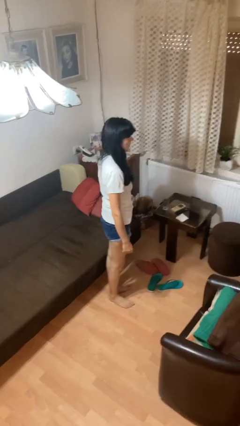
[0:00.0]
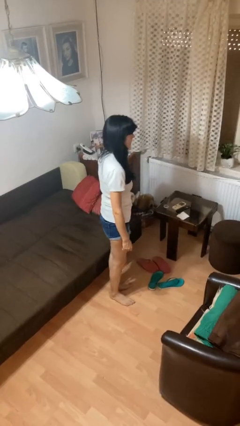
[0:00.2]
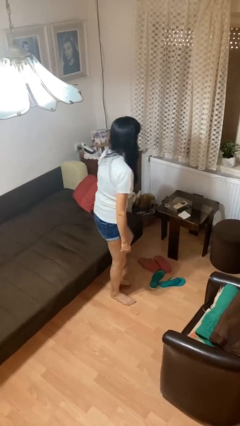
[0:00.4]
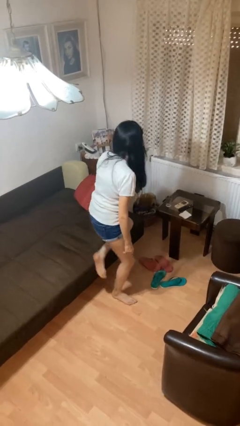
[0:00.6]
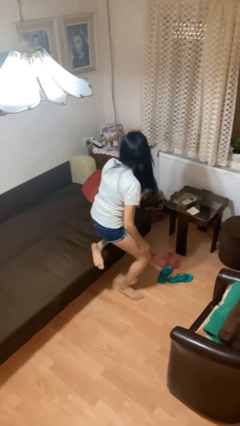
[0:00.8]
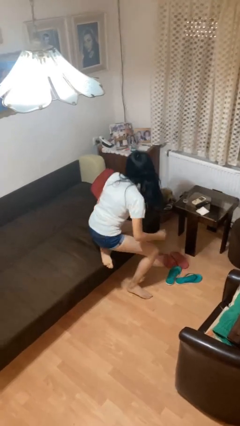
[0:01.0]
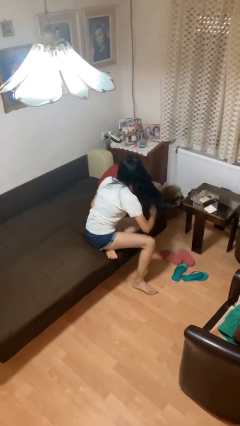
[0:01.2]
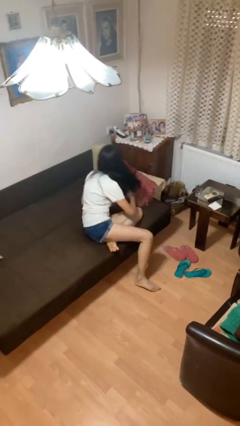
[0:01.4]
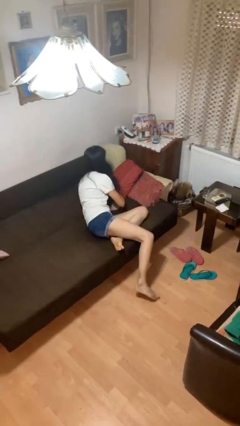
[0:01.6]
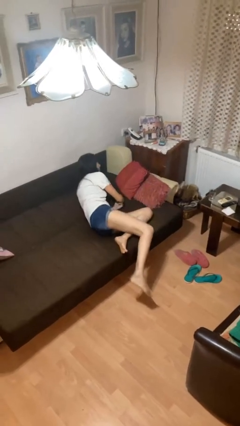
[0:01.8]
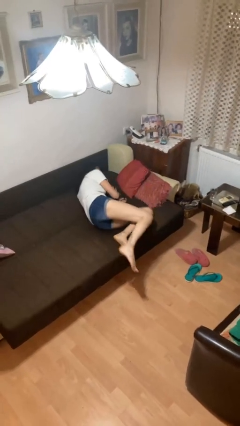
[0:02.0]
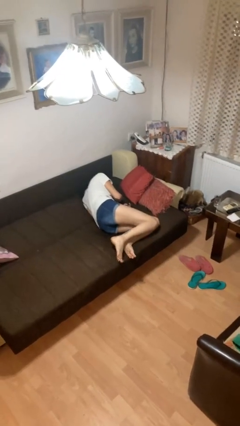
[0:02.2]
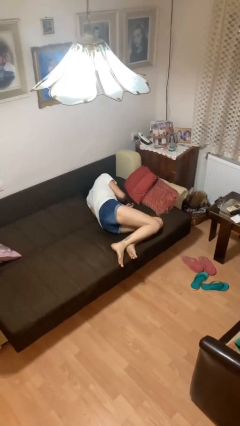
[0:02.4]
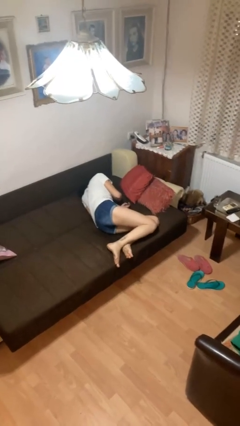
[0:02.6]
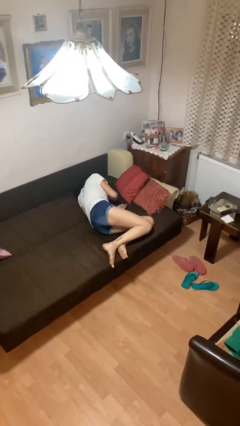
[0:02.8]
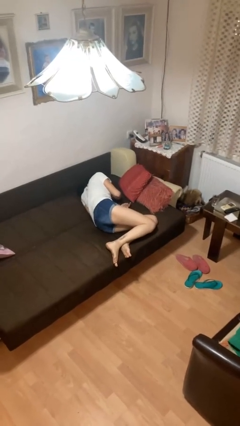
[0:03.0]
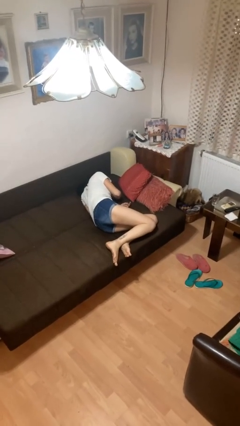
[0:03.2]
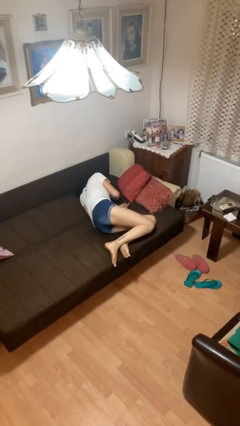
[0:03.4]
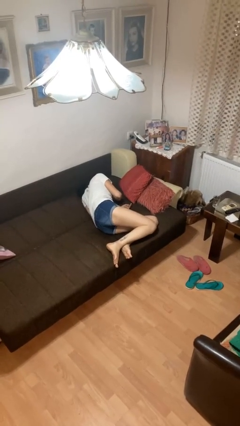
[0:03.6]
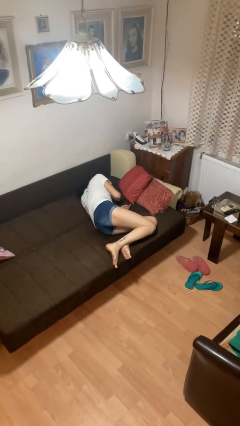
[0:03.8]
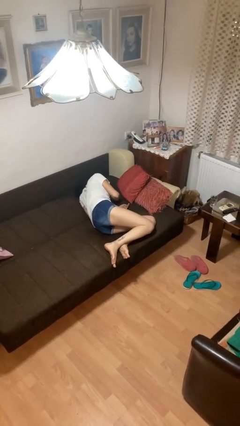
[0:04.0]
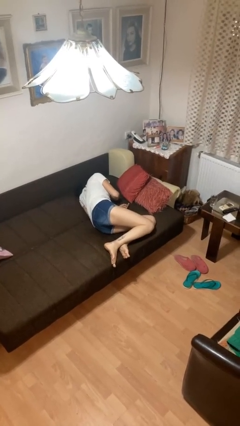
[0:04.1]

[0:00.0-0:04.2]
person lies down on bed

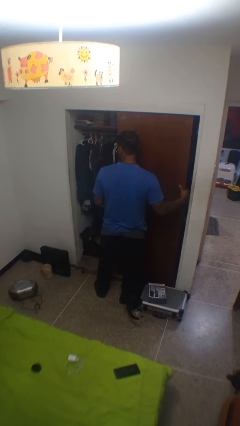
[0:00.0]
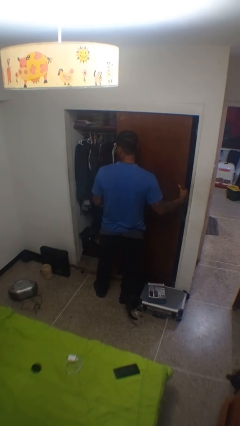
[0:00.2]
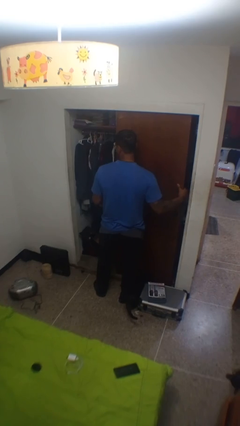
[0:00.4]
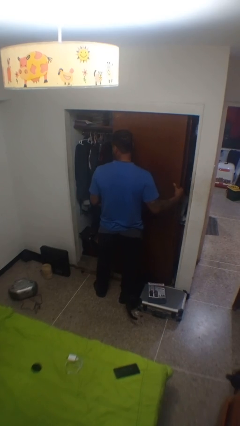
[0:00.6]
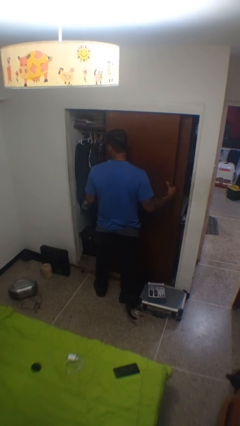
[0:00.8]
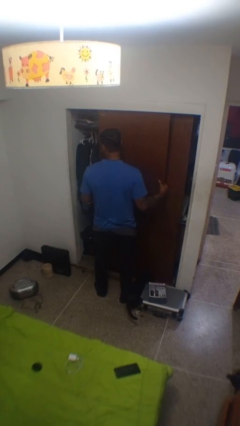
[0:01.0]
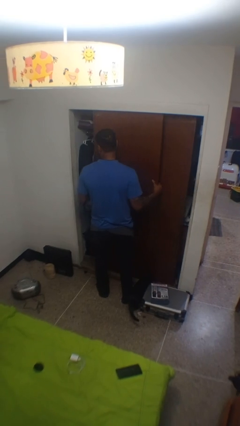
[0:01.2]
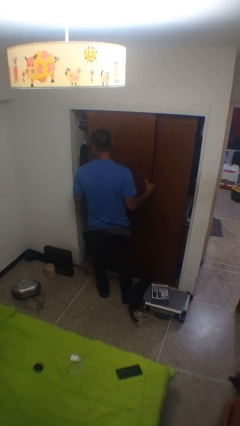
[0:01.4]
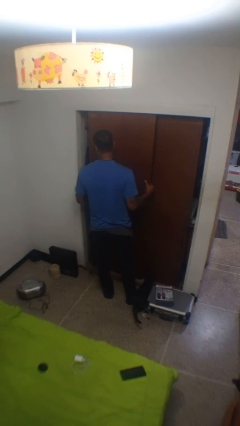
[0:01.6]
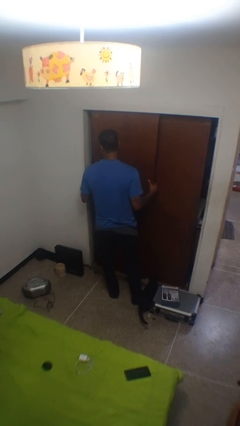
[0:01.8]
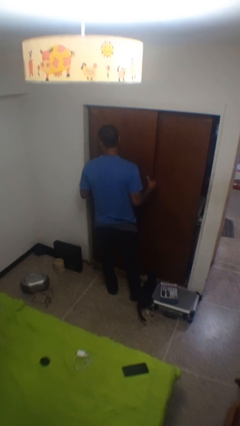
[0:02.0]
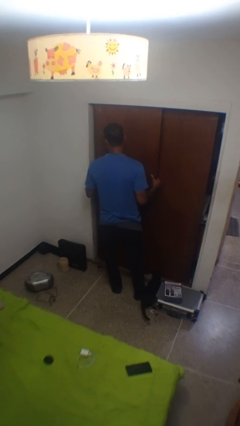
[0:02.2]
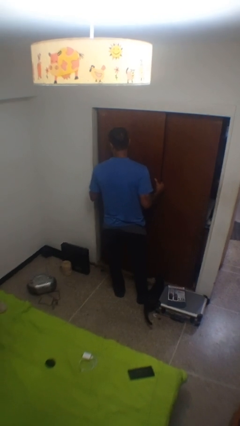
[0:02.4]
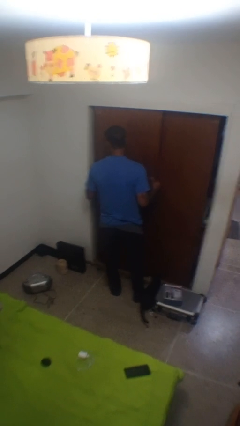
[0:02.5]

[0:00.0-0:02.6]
person closes closet door

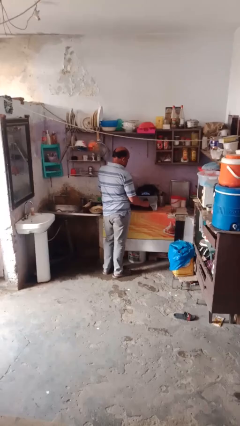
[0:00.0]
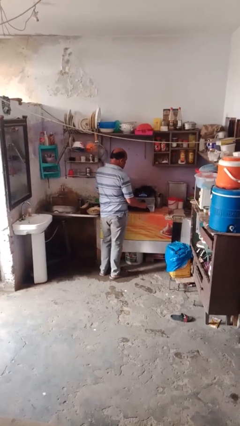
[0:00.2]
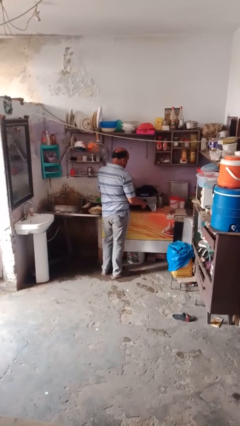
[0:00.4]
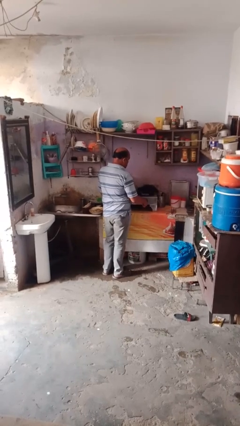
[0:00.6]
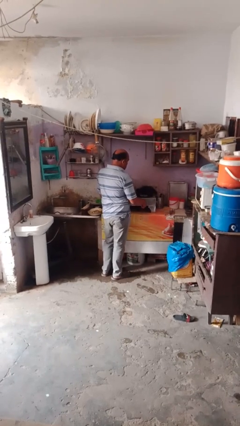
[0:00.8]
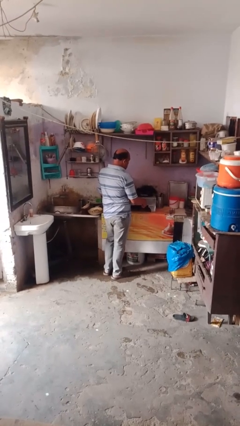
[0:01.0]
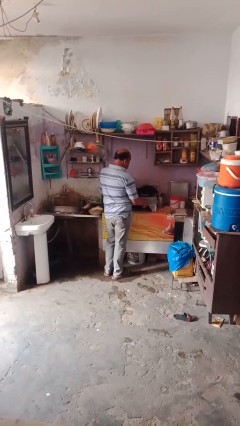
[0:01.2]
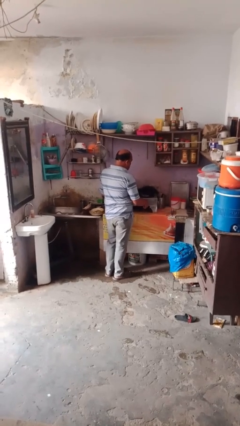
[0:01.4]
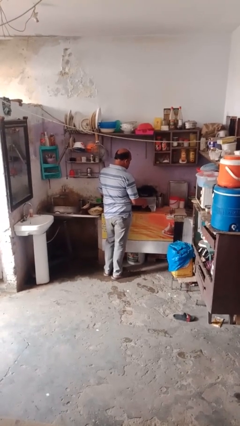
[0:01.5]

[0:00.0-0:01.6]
person turns off stovetop

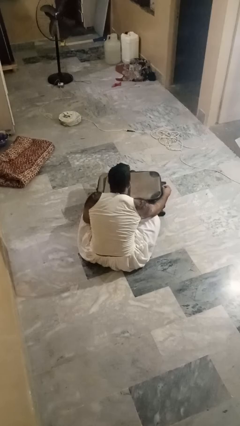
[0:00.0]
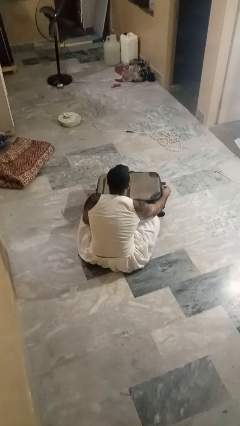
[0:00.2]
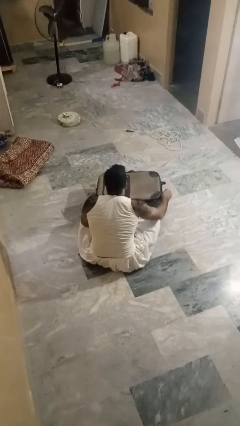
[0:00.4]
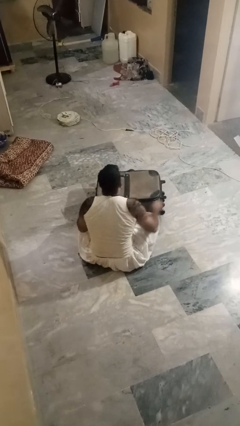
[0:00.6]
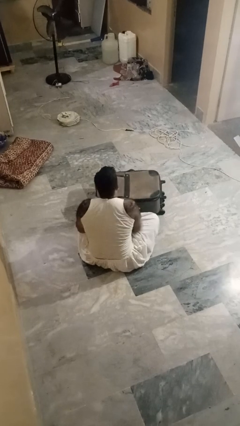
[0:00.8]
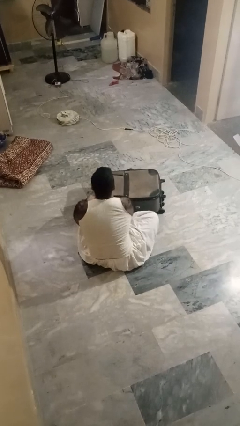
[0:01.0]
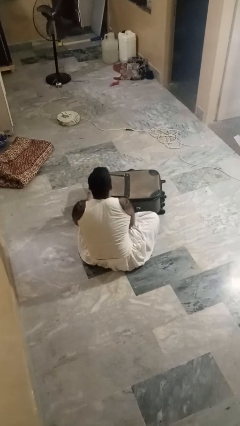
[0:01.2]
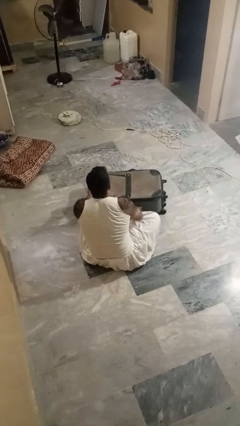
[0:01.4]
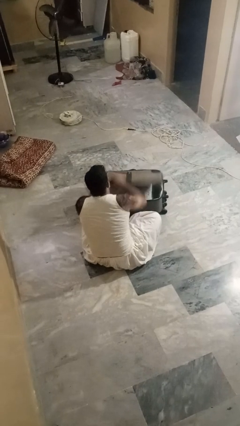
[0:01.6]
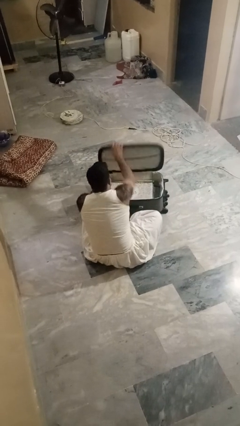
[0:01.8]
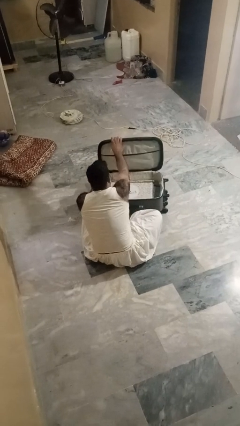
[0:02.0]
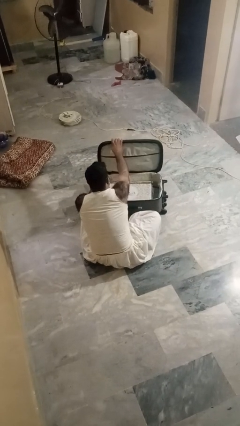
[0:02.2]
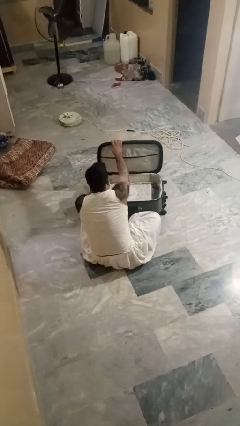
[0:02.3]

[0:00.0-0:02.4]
person opens suitcase

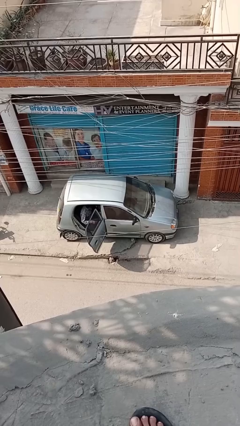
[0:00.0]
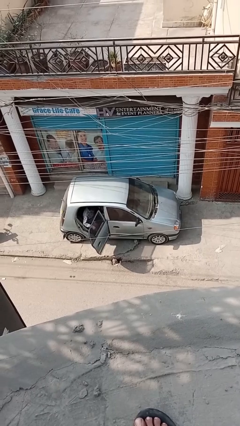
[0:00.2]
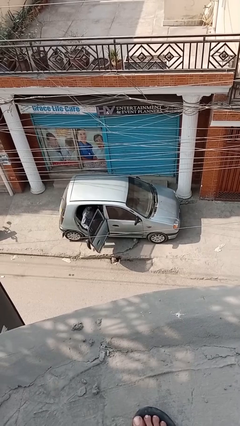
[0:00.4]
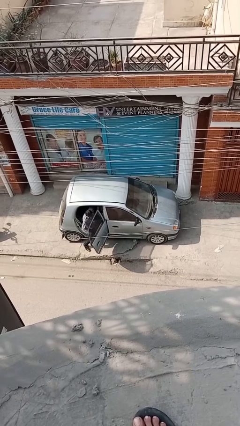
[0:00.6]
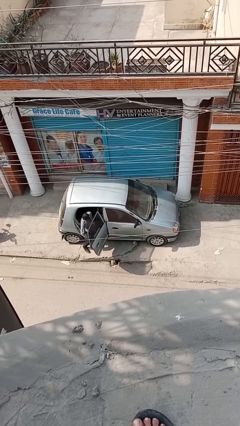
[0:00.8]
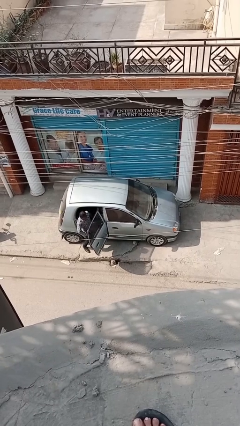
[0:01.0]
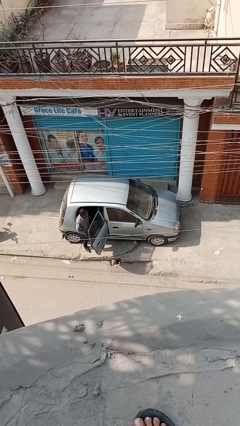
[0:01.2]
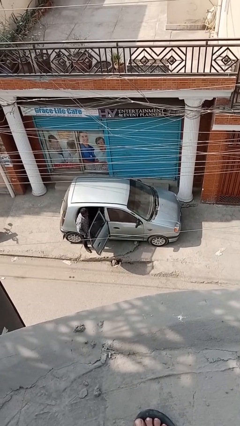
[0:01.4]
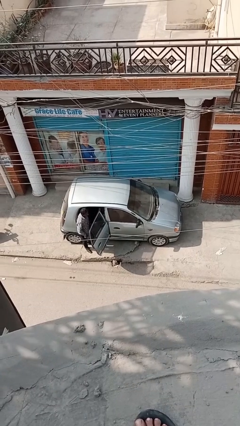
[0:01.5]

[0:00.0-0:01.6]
person exits car

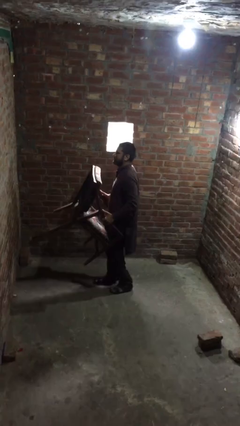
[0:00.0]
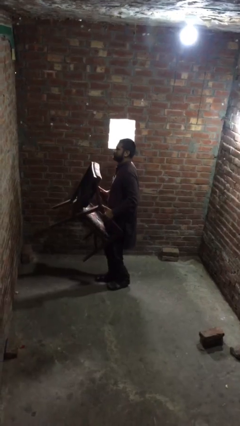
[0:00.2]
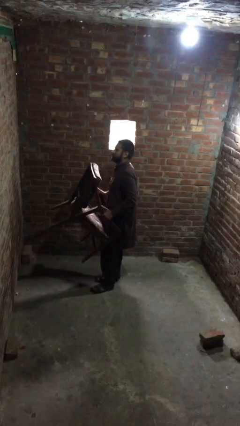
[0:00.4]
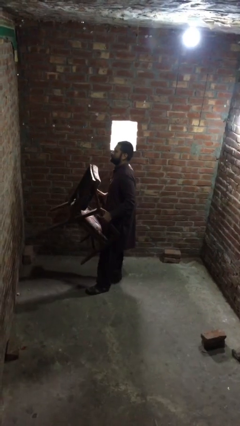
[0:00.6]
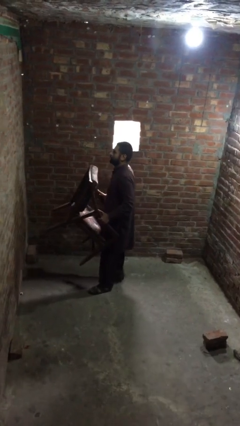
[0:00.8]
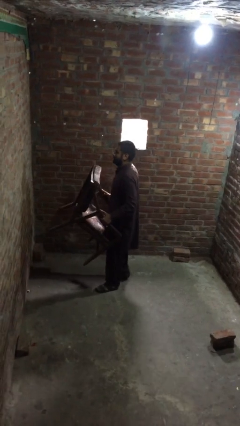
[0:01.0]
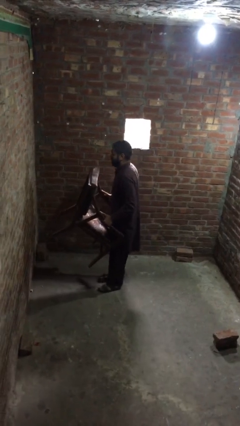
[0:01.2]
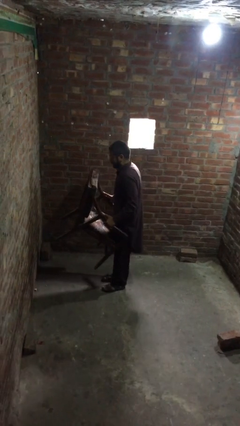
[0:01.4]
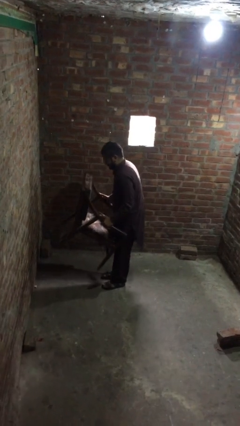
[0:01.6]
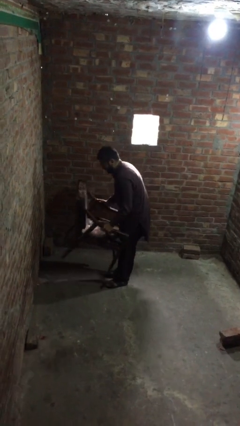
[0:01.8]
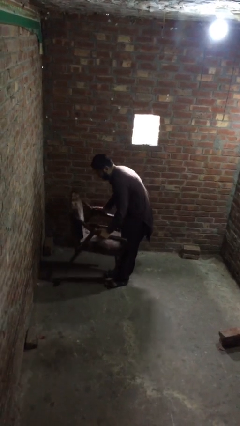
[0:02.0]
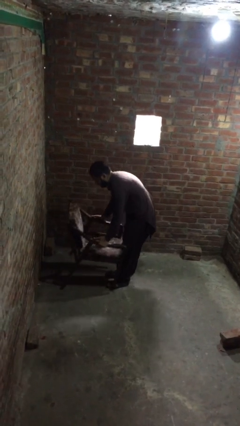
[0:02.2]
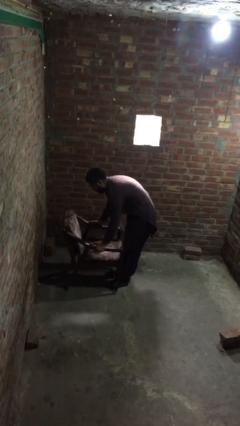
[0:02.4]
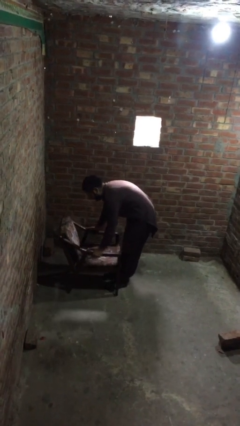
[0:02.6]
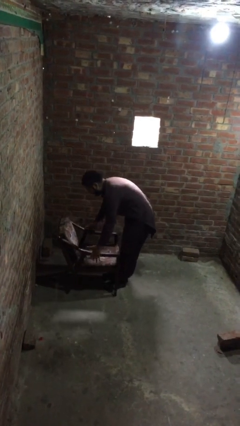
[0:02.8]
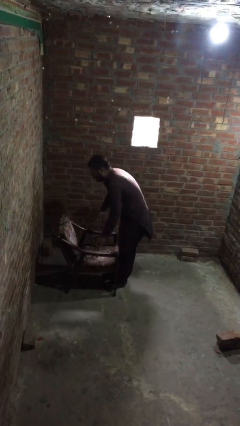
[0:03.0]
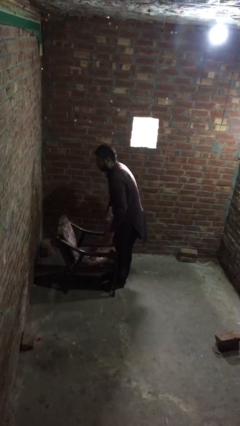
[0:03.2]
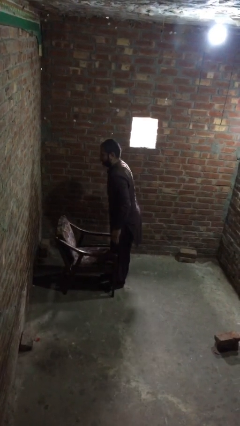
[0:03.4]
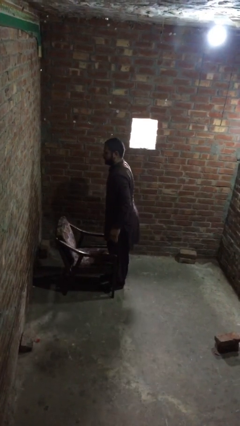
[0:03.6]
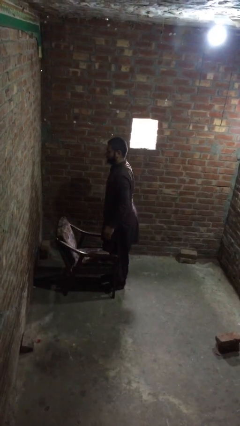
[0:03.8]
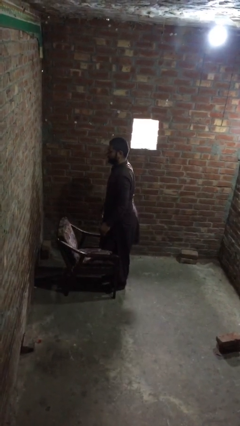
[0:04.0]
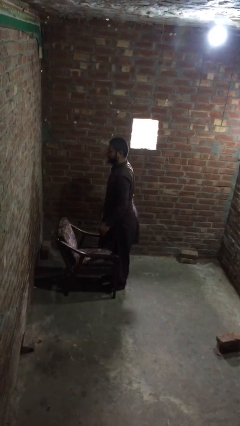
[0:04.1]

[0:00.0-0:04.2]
person puts down object on floor

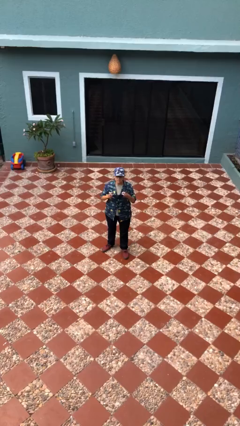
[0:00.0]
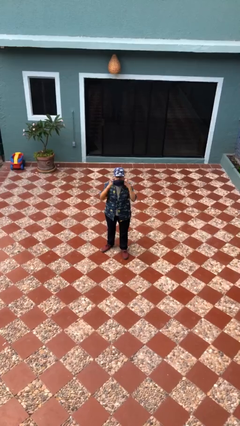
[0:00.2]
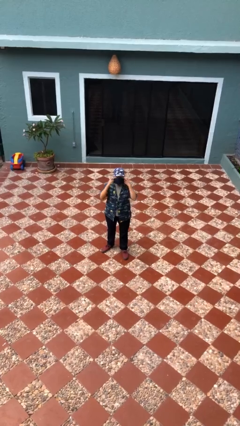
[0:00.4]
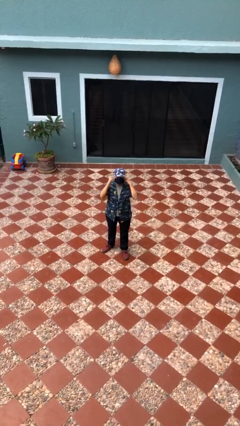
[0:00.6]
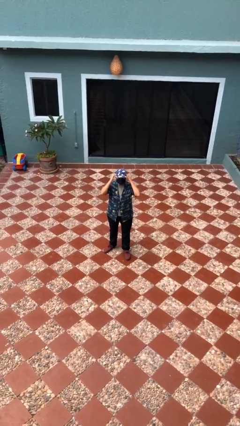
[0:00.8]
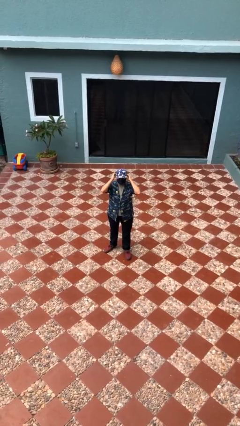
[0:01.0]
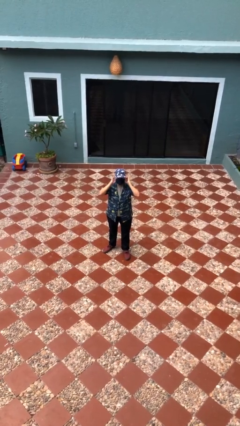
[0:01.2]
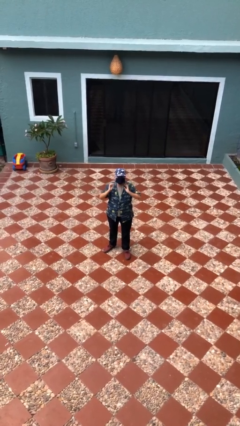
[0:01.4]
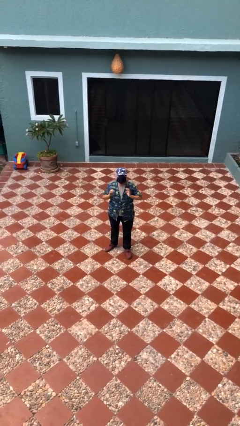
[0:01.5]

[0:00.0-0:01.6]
person puts on facemask
